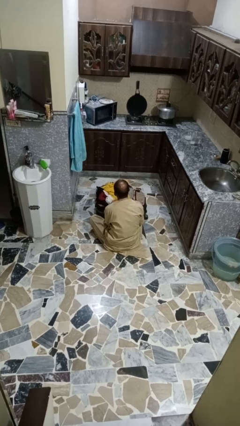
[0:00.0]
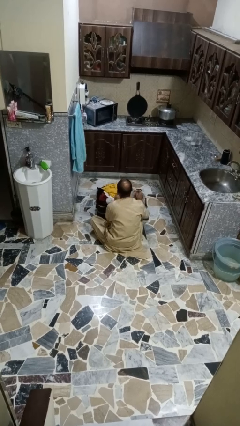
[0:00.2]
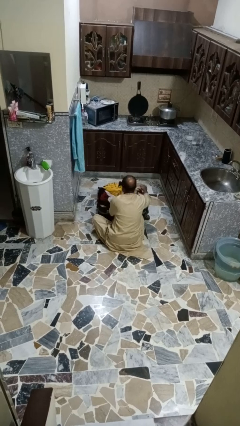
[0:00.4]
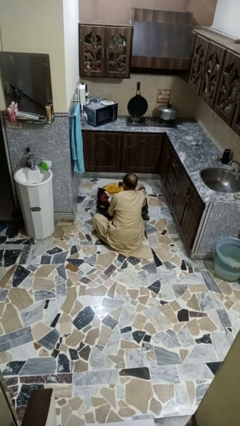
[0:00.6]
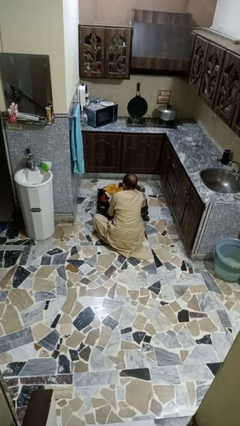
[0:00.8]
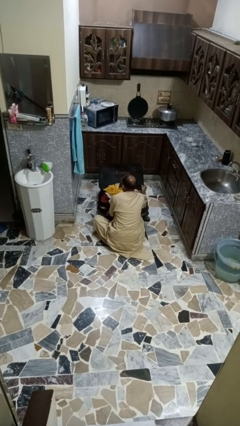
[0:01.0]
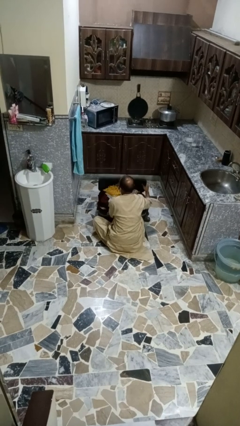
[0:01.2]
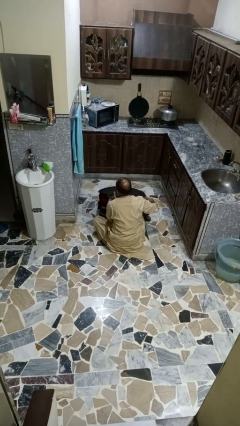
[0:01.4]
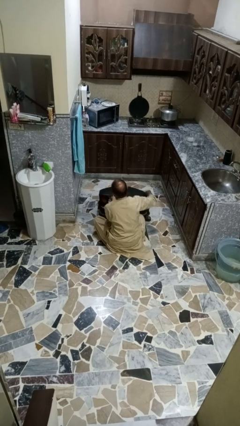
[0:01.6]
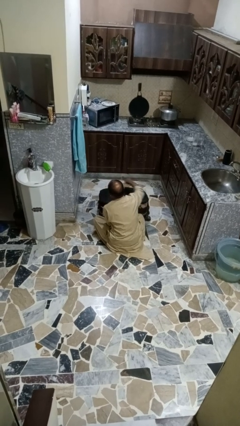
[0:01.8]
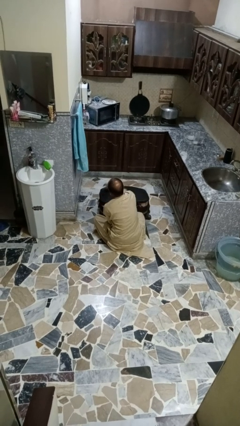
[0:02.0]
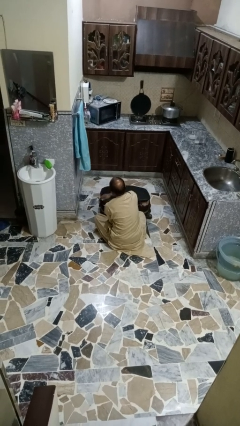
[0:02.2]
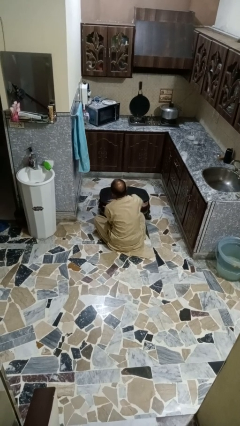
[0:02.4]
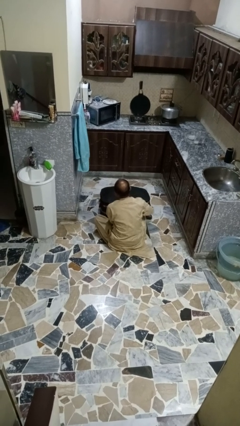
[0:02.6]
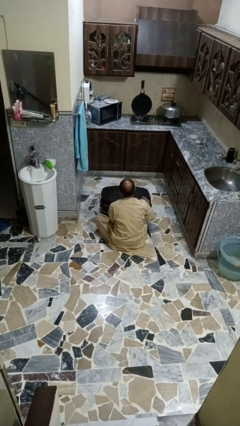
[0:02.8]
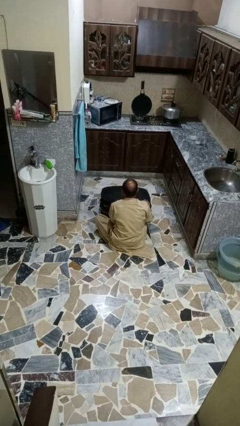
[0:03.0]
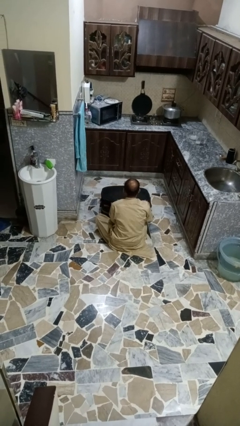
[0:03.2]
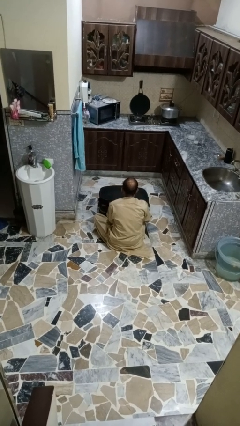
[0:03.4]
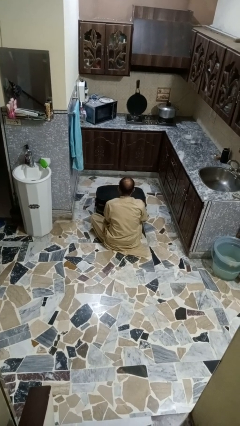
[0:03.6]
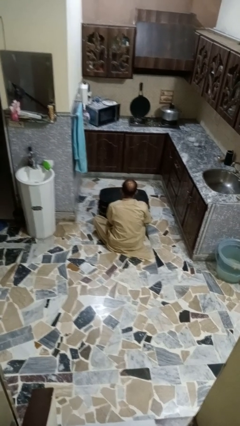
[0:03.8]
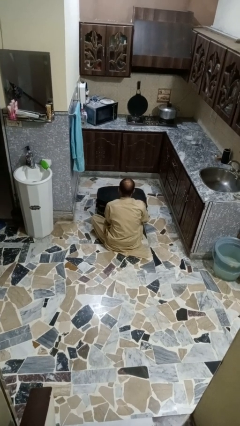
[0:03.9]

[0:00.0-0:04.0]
person closes suitcase

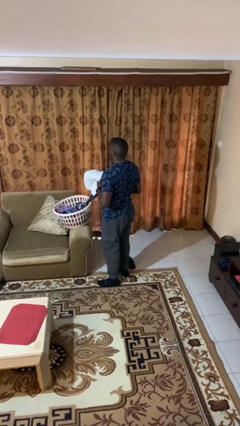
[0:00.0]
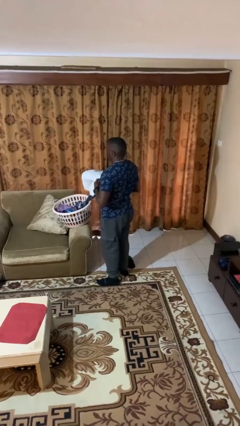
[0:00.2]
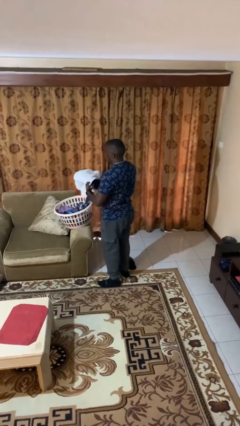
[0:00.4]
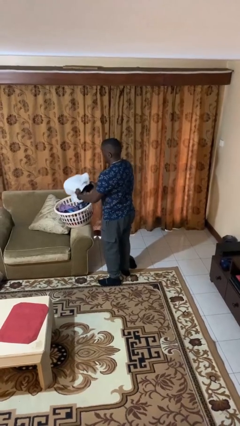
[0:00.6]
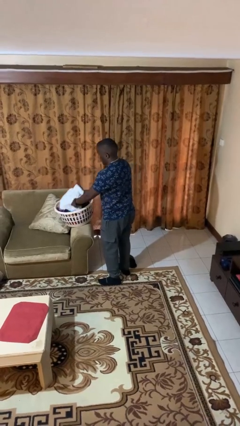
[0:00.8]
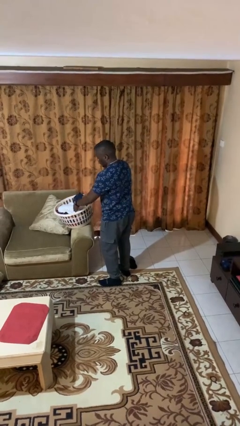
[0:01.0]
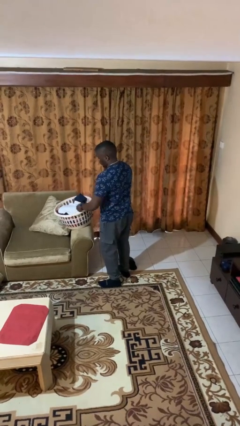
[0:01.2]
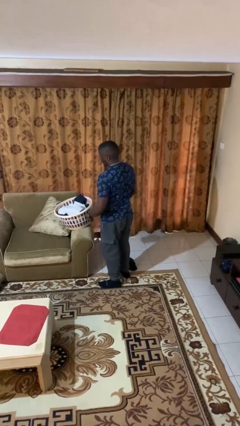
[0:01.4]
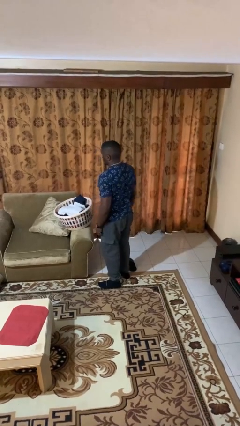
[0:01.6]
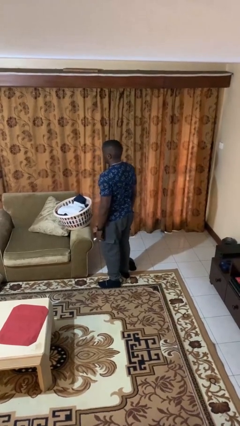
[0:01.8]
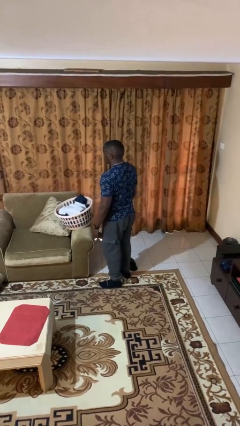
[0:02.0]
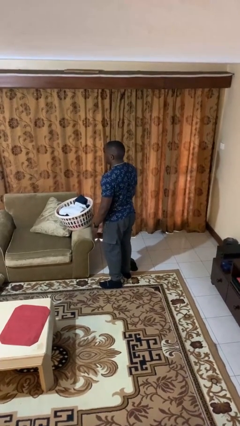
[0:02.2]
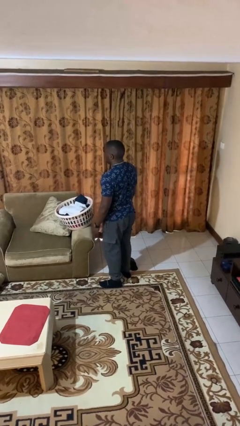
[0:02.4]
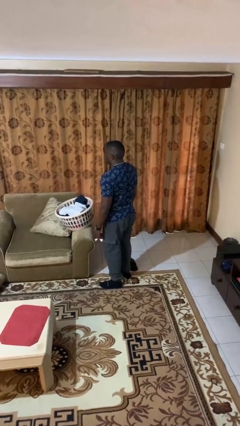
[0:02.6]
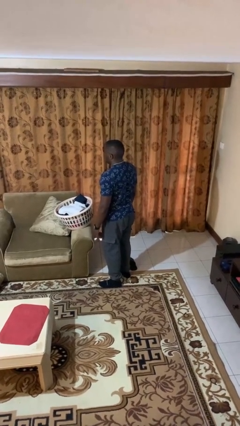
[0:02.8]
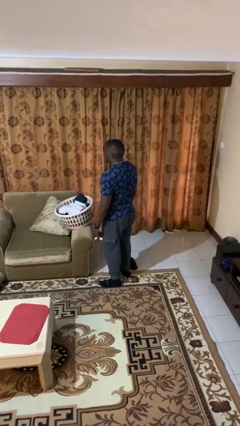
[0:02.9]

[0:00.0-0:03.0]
person puts object into basket

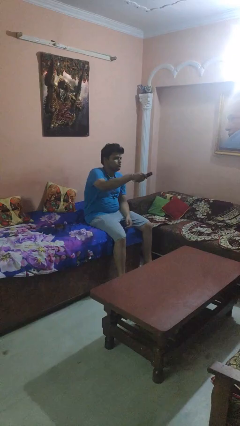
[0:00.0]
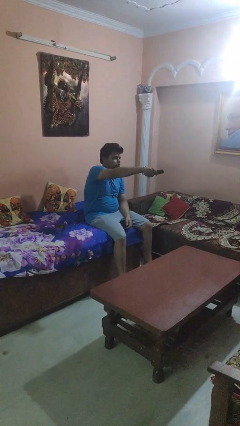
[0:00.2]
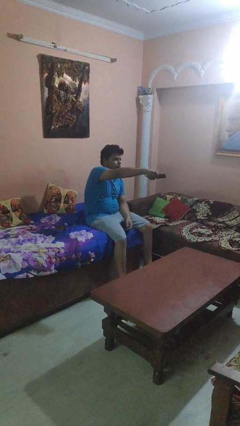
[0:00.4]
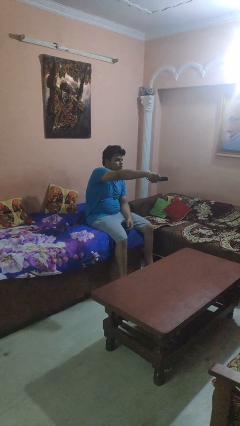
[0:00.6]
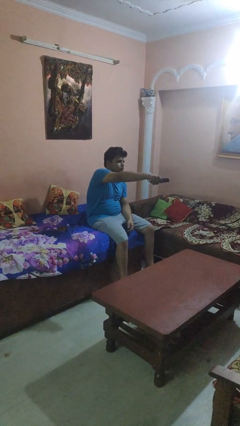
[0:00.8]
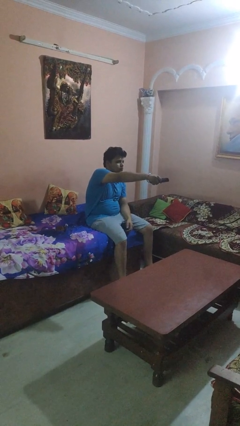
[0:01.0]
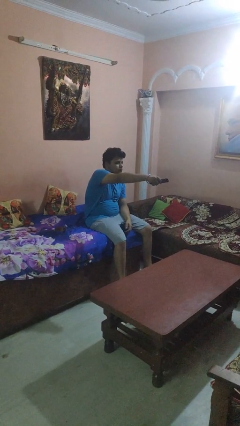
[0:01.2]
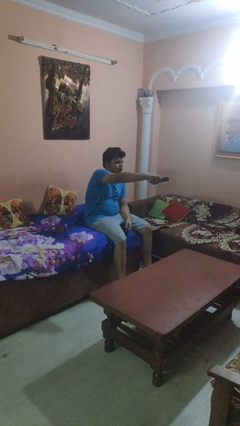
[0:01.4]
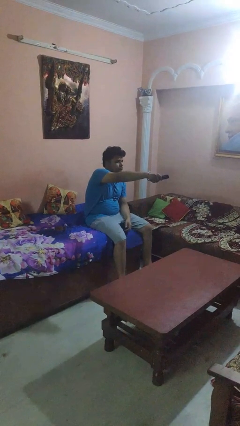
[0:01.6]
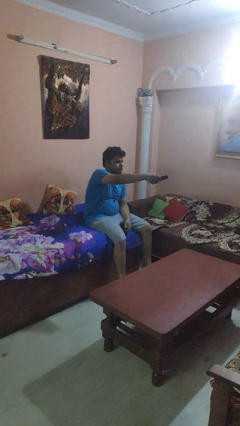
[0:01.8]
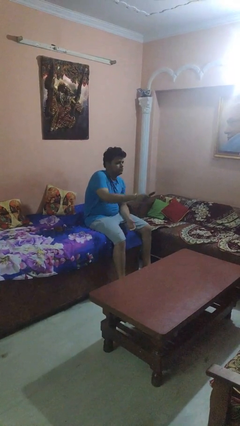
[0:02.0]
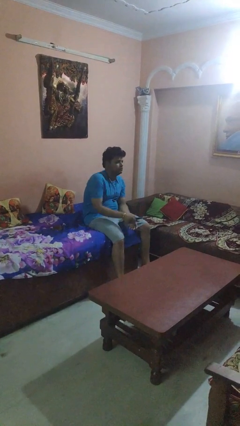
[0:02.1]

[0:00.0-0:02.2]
person uses television remote

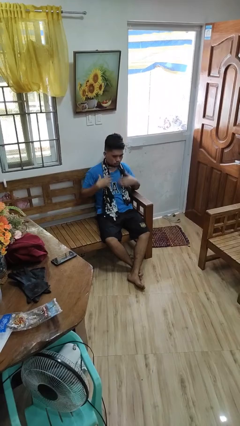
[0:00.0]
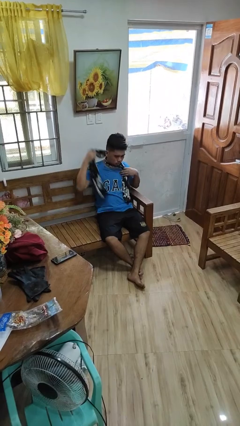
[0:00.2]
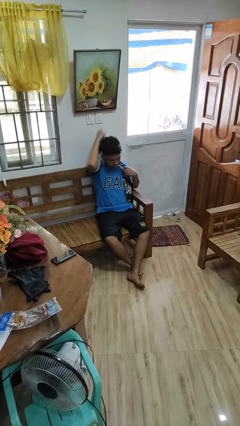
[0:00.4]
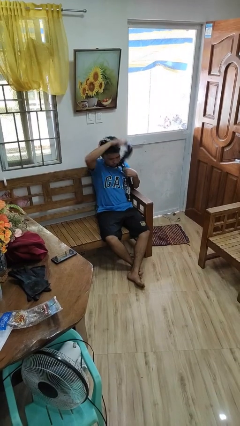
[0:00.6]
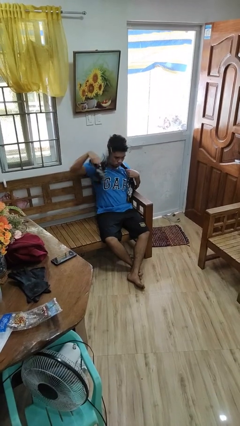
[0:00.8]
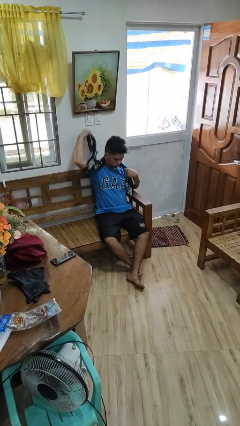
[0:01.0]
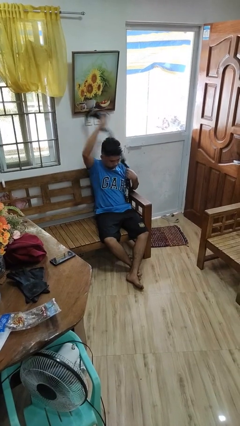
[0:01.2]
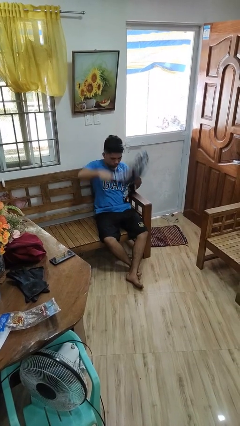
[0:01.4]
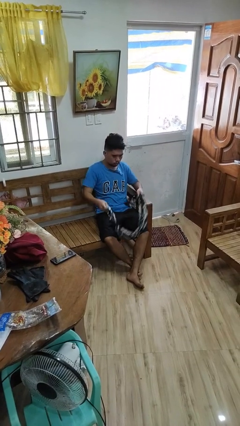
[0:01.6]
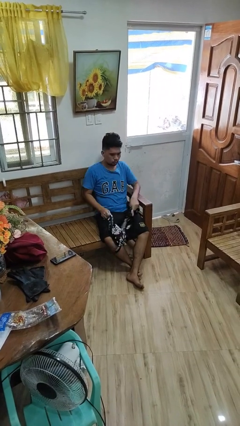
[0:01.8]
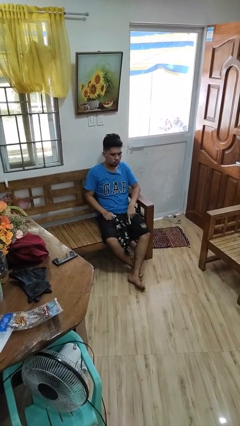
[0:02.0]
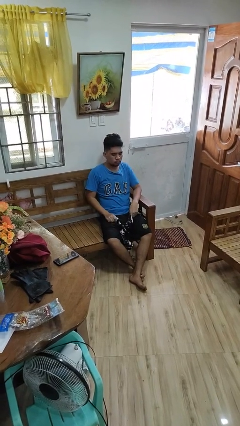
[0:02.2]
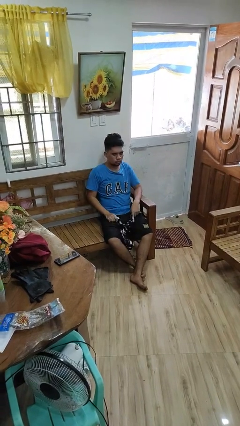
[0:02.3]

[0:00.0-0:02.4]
person takes off scarf

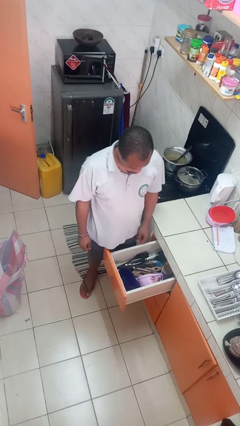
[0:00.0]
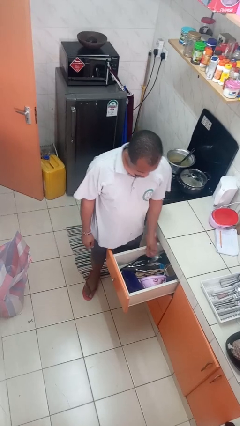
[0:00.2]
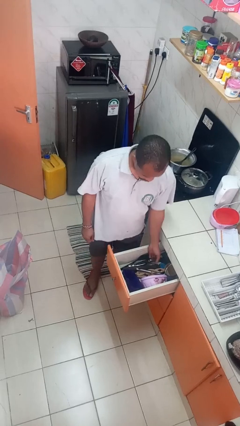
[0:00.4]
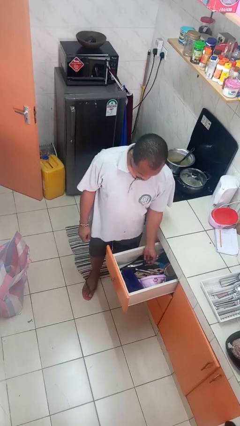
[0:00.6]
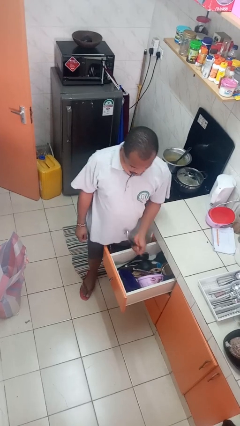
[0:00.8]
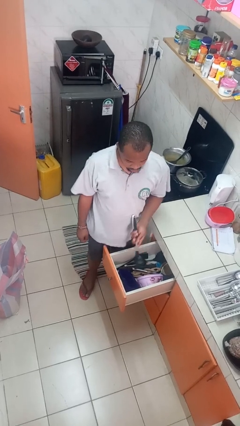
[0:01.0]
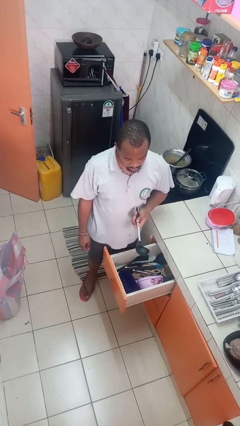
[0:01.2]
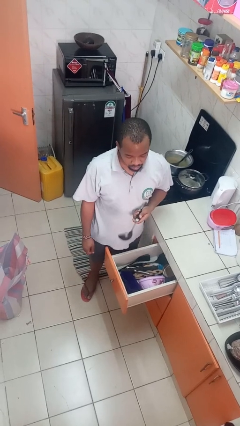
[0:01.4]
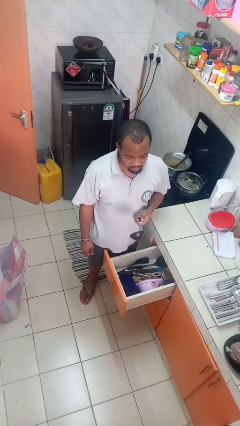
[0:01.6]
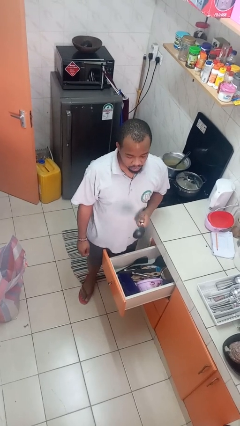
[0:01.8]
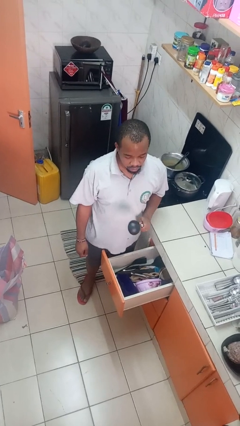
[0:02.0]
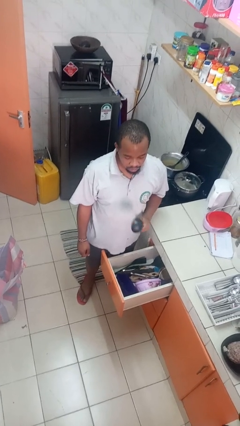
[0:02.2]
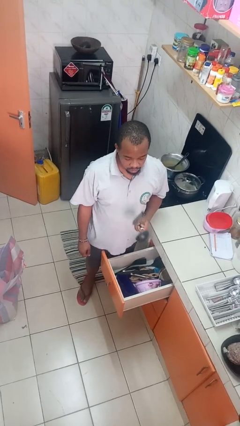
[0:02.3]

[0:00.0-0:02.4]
person takes object from kitchen drawer

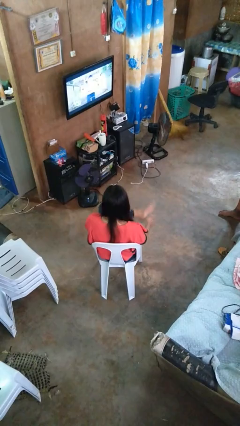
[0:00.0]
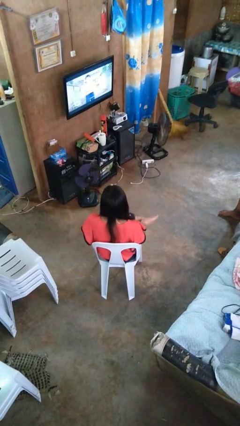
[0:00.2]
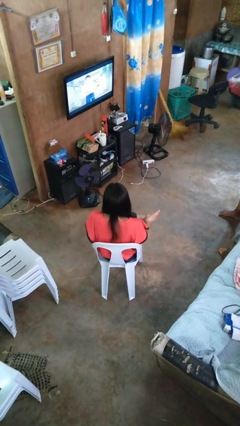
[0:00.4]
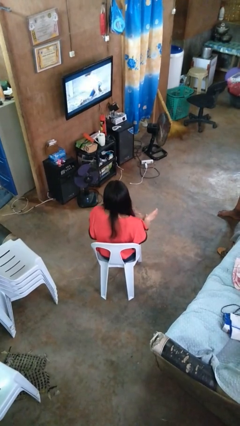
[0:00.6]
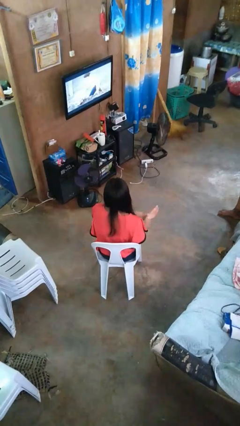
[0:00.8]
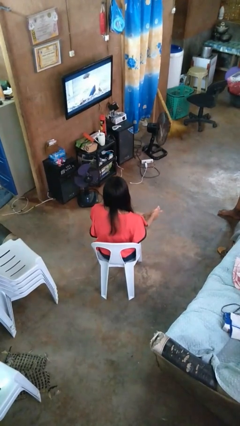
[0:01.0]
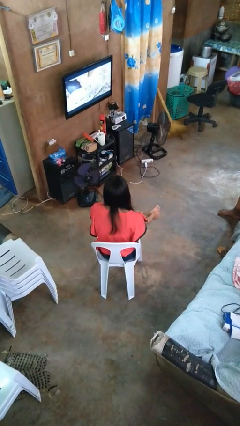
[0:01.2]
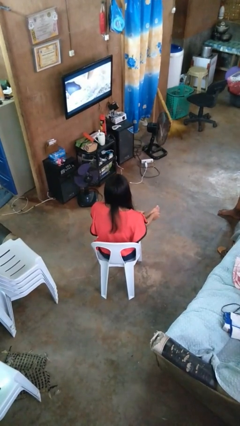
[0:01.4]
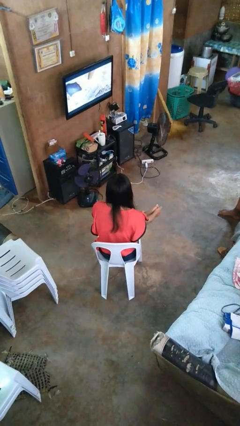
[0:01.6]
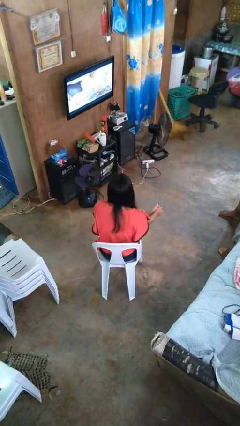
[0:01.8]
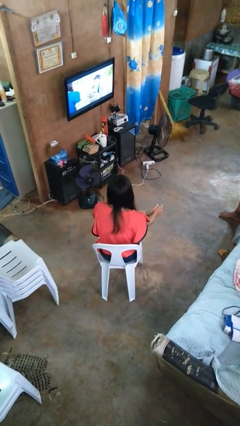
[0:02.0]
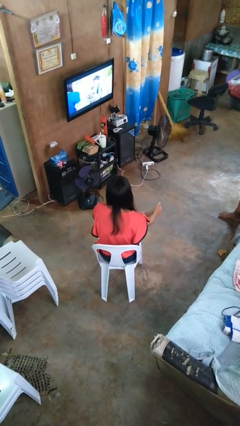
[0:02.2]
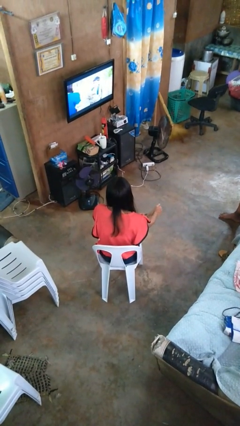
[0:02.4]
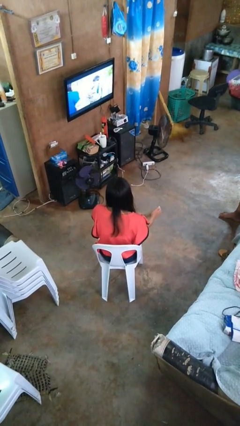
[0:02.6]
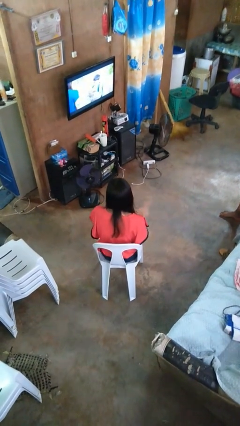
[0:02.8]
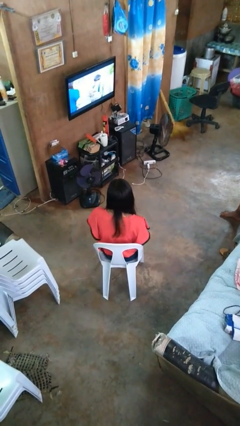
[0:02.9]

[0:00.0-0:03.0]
person rubs foot

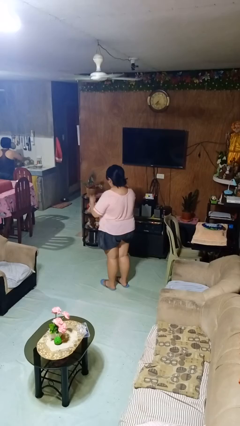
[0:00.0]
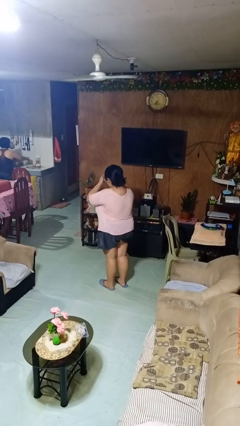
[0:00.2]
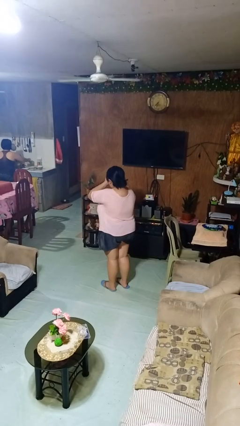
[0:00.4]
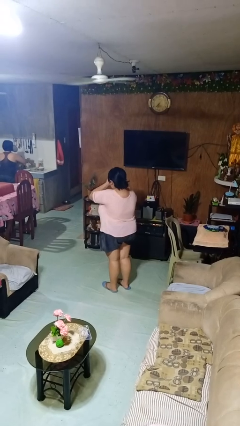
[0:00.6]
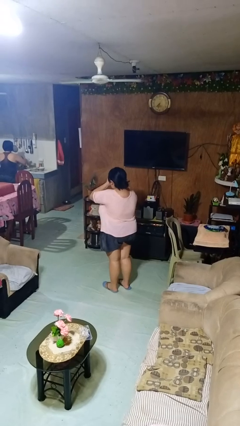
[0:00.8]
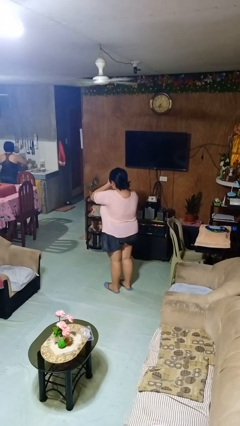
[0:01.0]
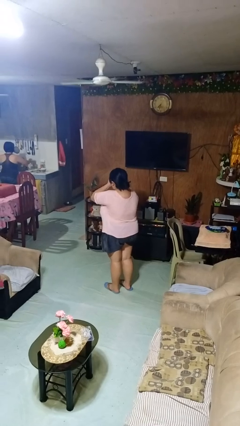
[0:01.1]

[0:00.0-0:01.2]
person yawns
